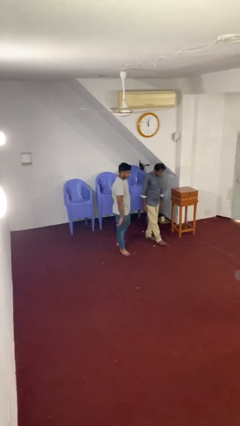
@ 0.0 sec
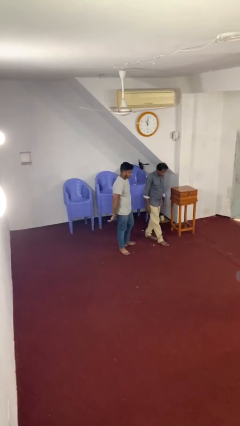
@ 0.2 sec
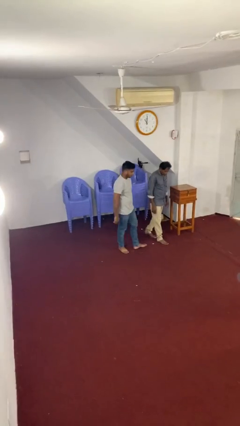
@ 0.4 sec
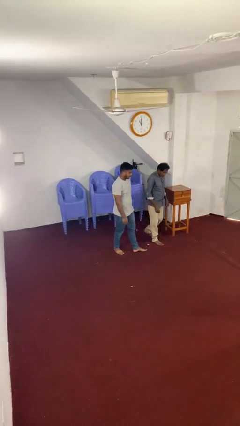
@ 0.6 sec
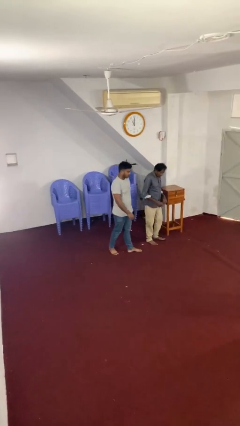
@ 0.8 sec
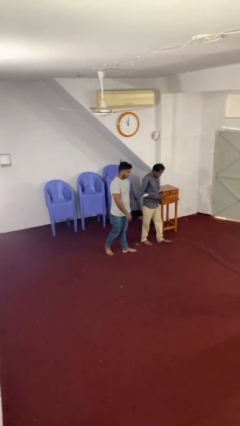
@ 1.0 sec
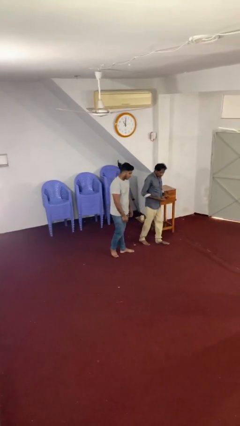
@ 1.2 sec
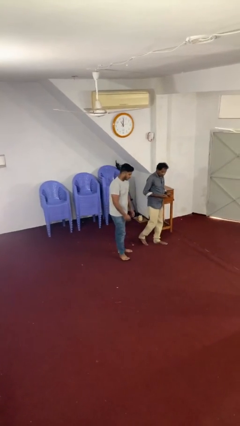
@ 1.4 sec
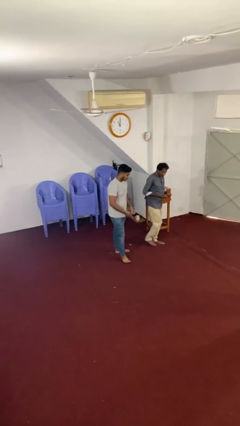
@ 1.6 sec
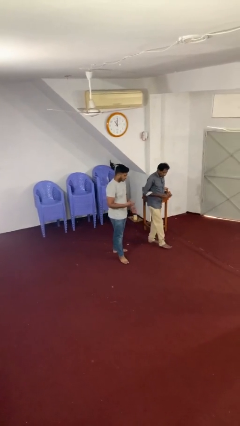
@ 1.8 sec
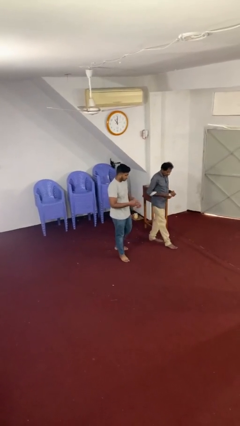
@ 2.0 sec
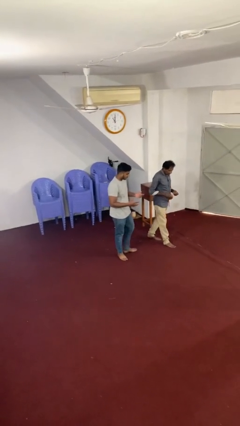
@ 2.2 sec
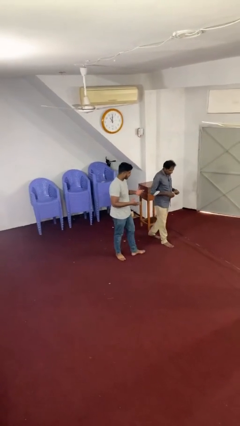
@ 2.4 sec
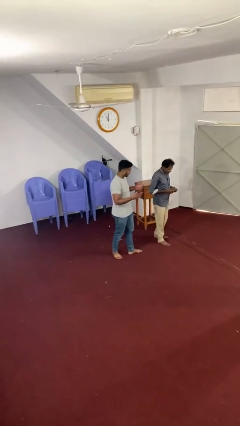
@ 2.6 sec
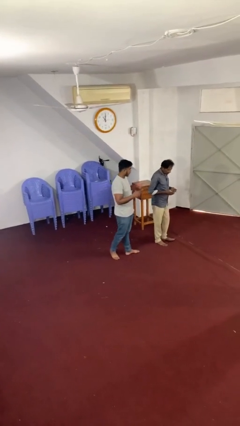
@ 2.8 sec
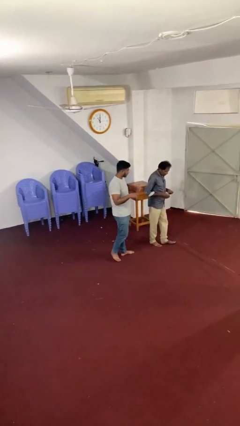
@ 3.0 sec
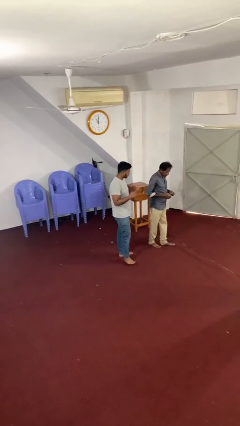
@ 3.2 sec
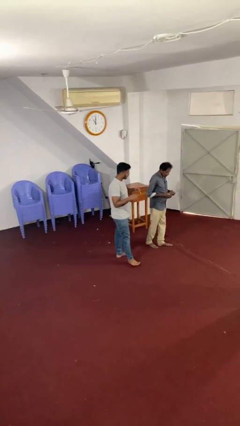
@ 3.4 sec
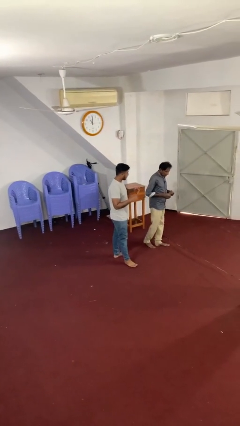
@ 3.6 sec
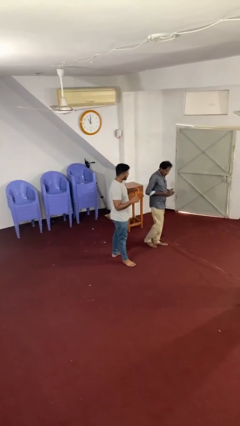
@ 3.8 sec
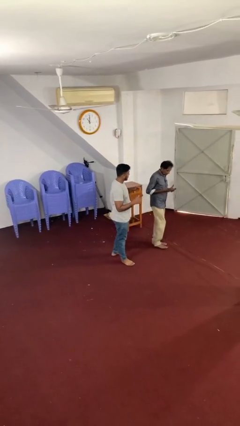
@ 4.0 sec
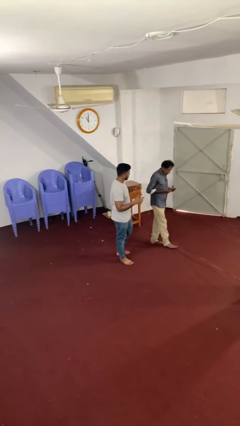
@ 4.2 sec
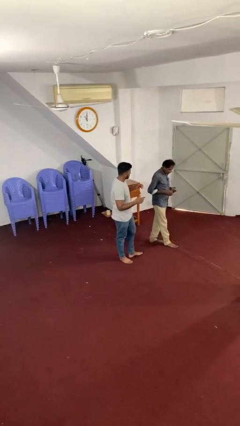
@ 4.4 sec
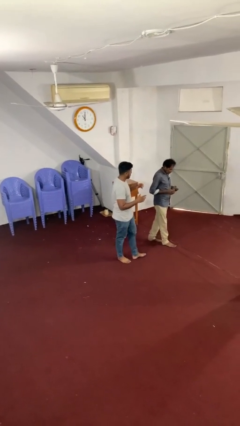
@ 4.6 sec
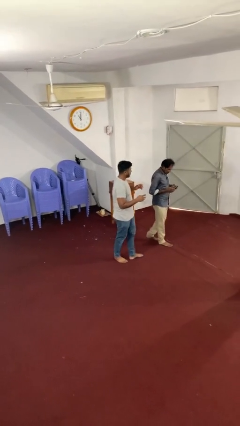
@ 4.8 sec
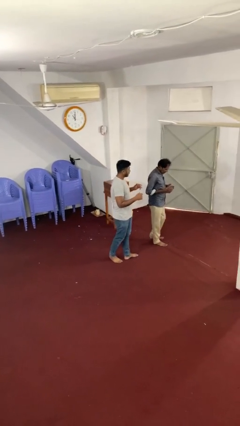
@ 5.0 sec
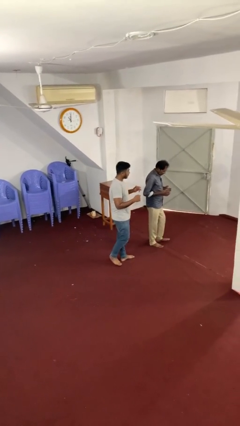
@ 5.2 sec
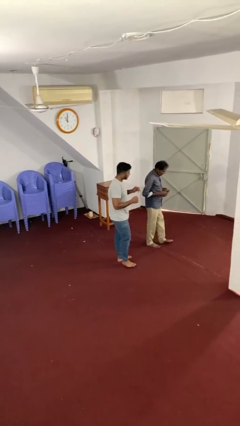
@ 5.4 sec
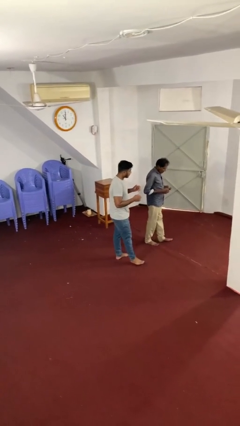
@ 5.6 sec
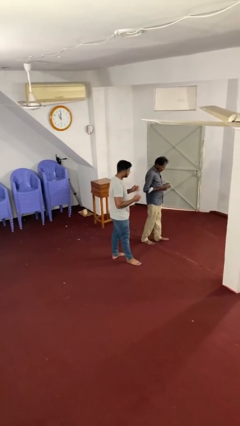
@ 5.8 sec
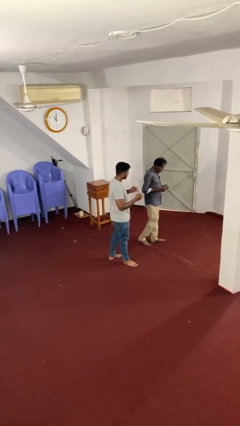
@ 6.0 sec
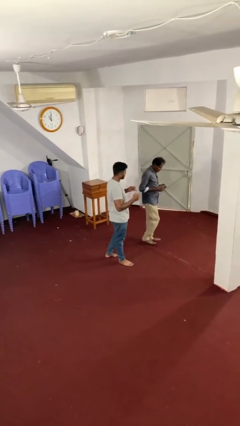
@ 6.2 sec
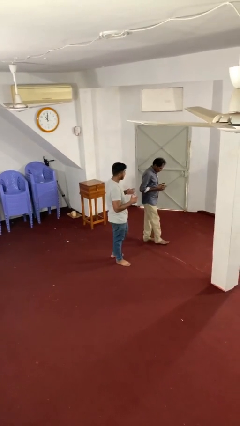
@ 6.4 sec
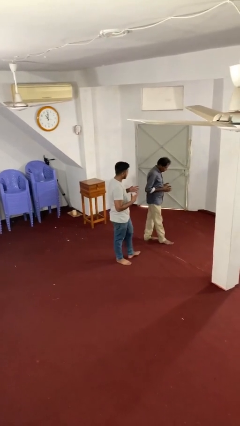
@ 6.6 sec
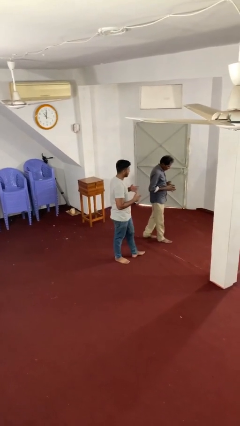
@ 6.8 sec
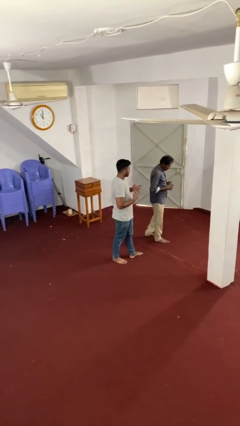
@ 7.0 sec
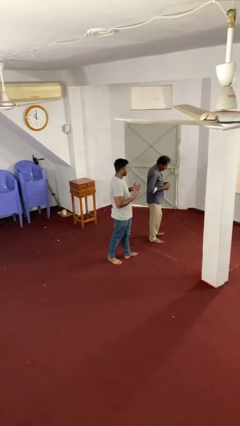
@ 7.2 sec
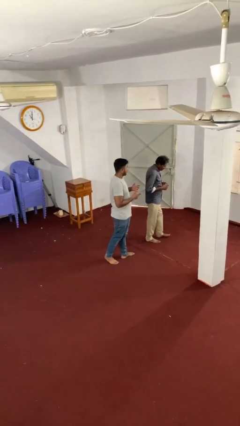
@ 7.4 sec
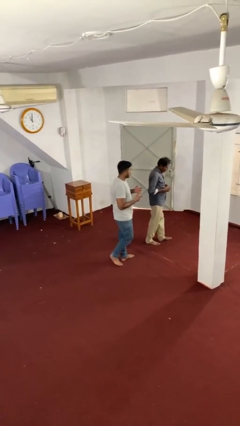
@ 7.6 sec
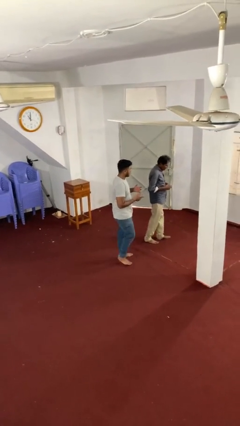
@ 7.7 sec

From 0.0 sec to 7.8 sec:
person talks to person

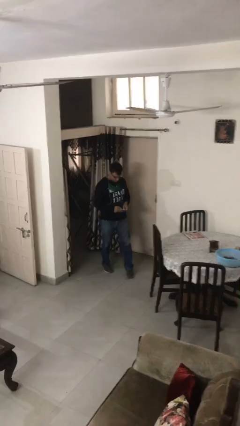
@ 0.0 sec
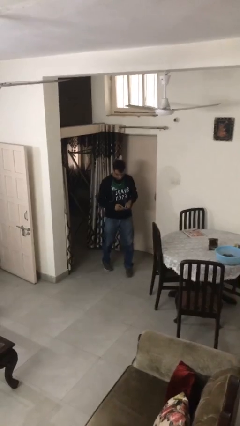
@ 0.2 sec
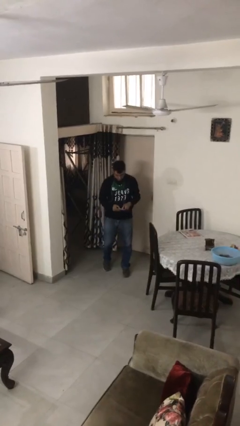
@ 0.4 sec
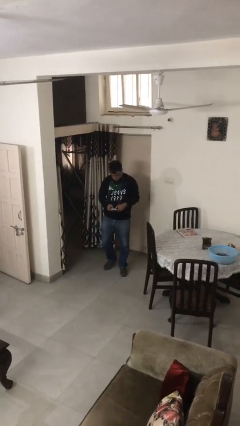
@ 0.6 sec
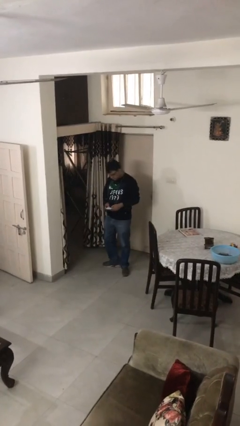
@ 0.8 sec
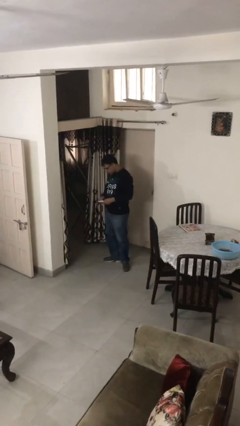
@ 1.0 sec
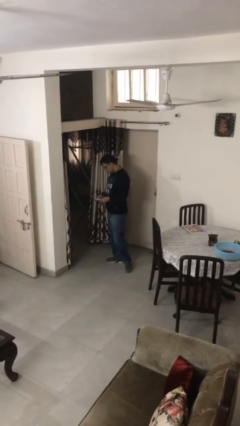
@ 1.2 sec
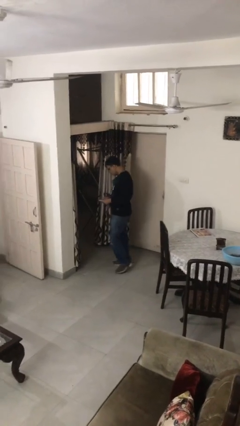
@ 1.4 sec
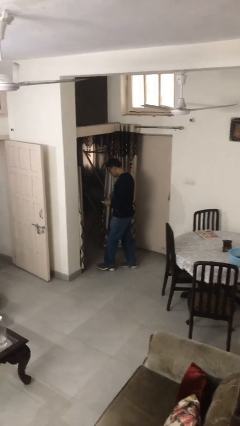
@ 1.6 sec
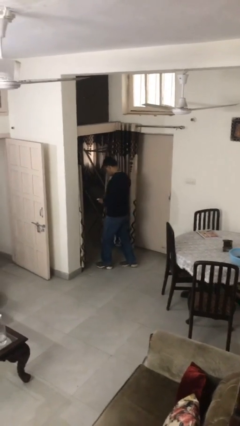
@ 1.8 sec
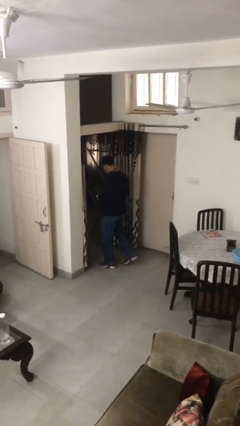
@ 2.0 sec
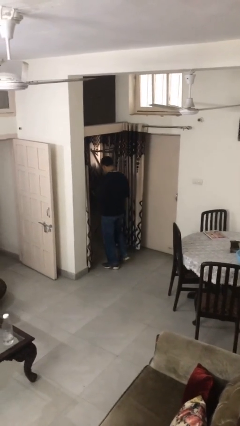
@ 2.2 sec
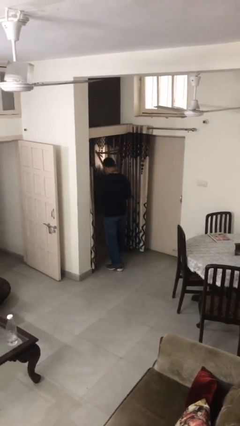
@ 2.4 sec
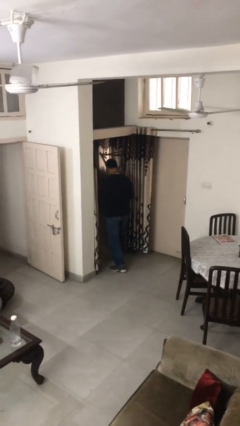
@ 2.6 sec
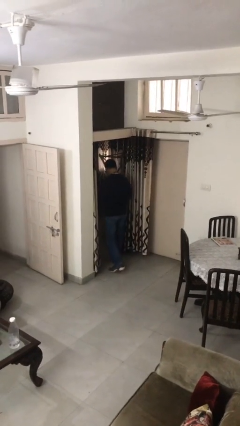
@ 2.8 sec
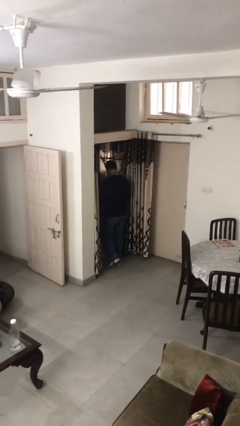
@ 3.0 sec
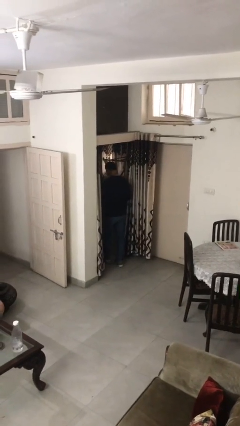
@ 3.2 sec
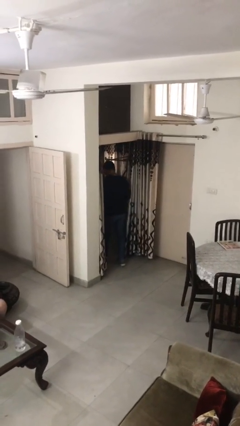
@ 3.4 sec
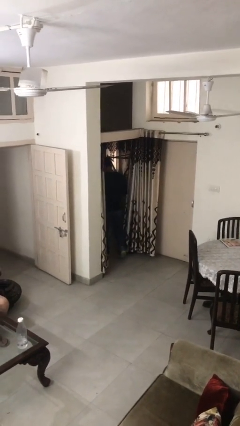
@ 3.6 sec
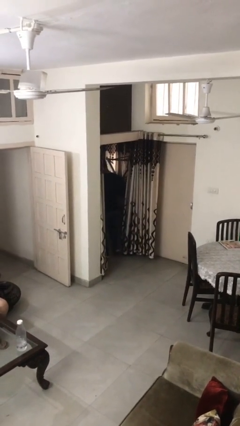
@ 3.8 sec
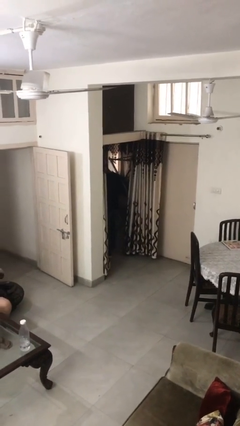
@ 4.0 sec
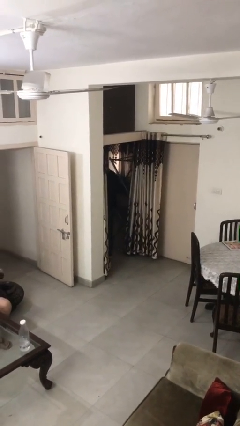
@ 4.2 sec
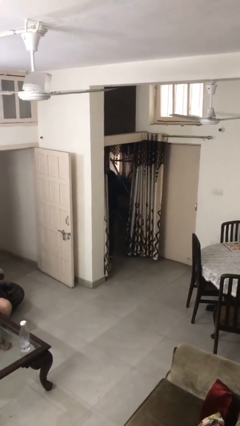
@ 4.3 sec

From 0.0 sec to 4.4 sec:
person exits scene through structure

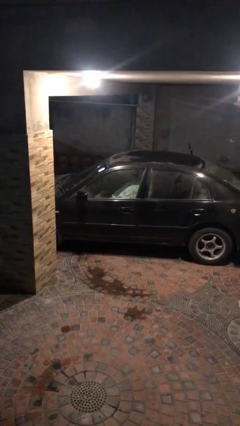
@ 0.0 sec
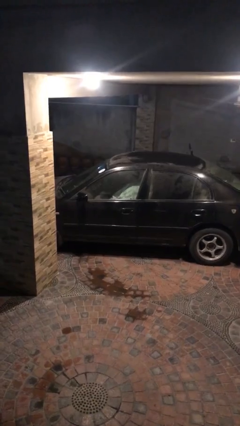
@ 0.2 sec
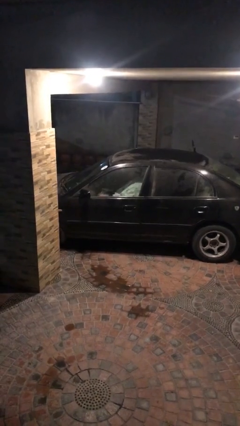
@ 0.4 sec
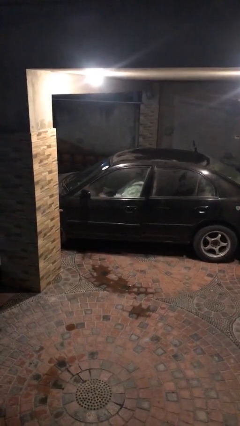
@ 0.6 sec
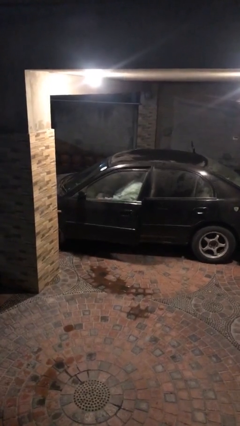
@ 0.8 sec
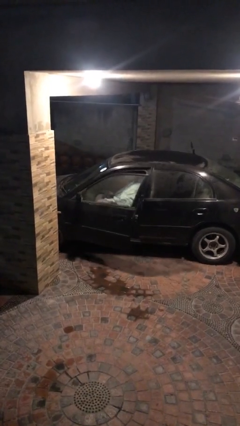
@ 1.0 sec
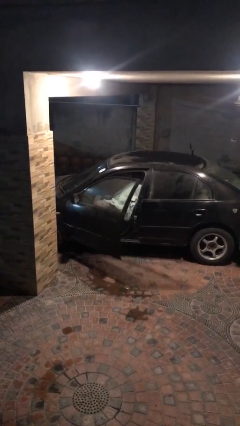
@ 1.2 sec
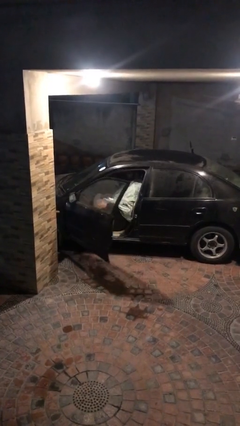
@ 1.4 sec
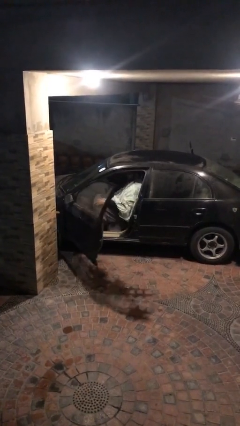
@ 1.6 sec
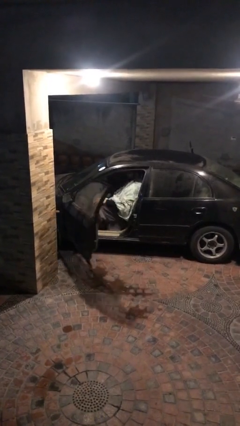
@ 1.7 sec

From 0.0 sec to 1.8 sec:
person opens car door

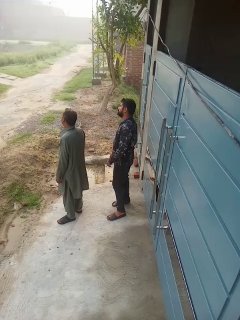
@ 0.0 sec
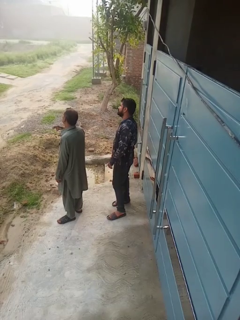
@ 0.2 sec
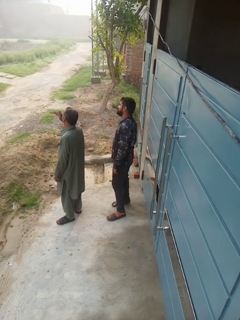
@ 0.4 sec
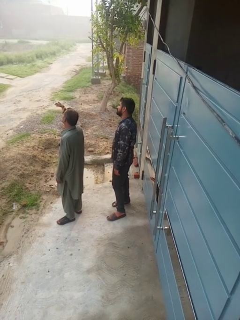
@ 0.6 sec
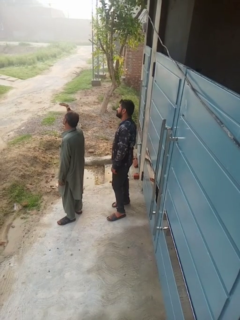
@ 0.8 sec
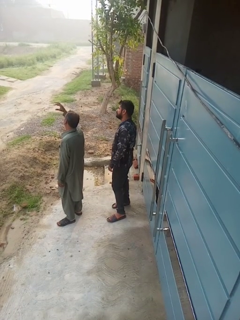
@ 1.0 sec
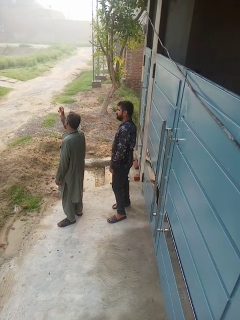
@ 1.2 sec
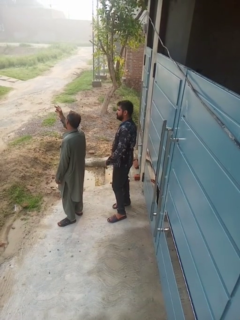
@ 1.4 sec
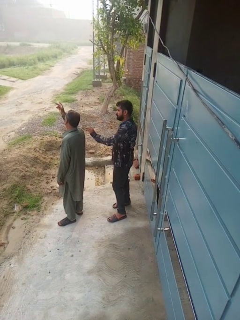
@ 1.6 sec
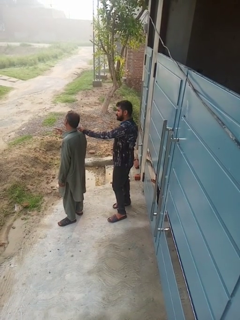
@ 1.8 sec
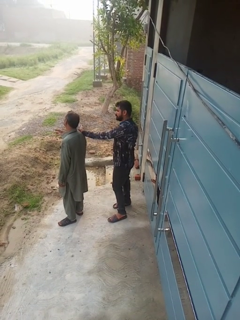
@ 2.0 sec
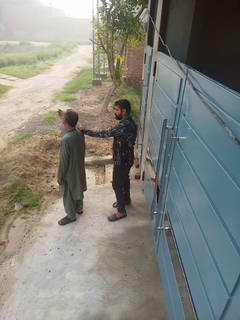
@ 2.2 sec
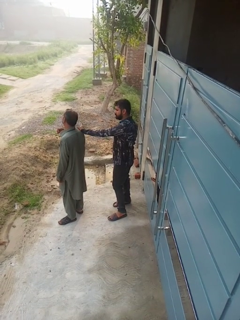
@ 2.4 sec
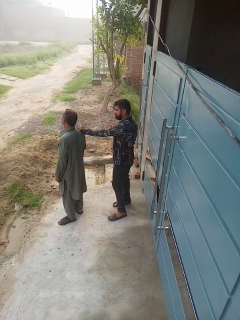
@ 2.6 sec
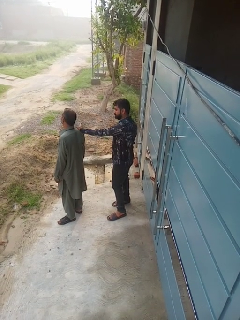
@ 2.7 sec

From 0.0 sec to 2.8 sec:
person grabs person by shoulder

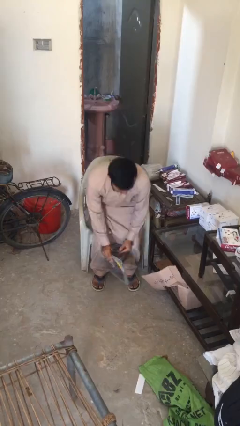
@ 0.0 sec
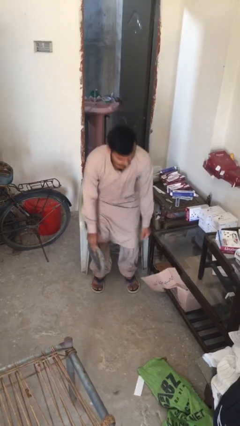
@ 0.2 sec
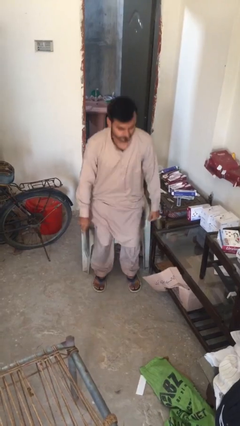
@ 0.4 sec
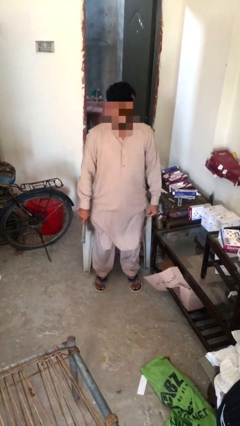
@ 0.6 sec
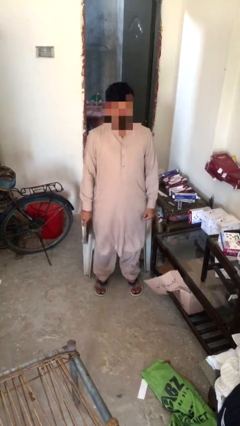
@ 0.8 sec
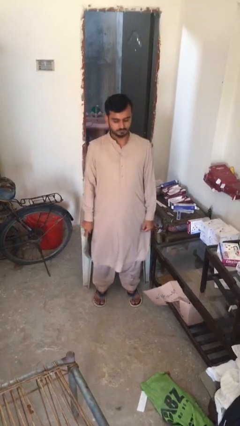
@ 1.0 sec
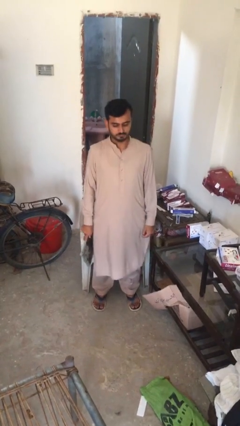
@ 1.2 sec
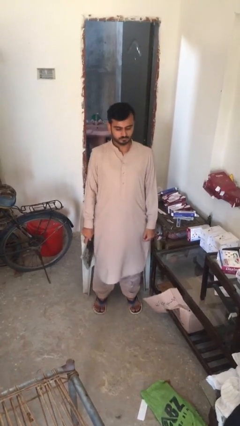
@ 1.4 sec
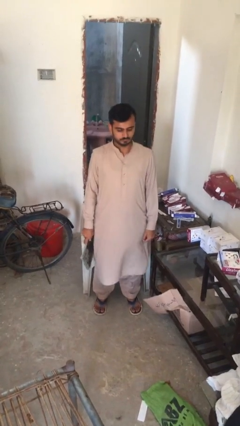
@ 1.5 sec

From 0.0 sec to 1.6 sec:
person stands up
